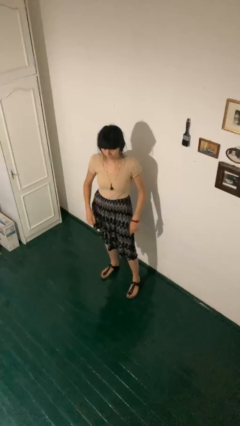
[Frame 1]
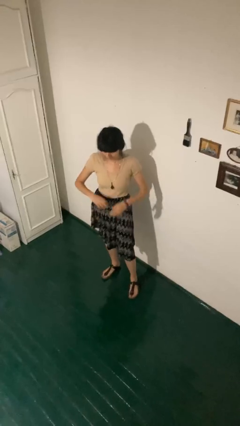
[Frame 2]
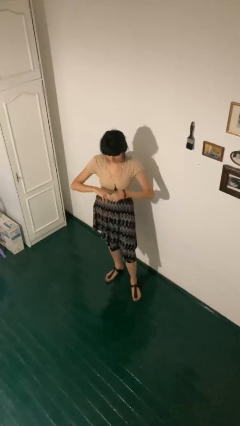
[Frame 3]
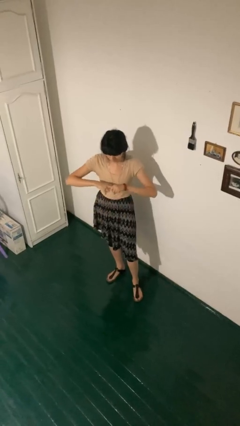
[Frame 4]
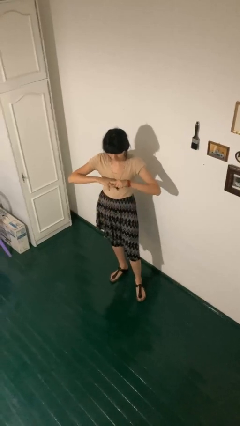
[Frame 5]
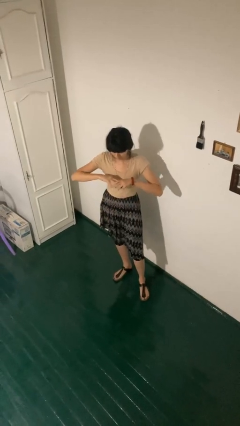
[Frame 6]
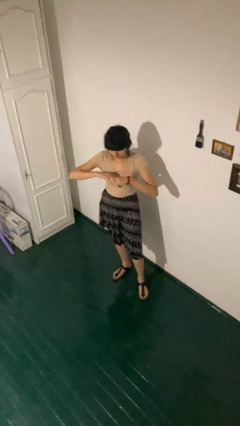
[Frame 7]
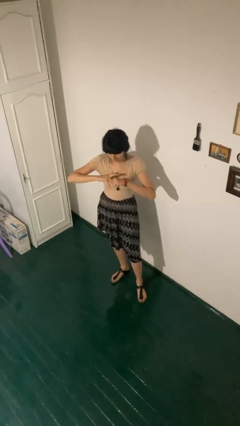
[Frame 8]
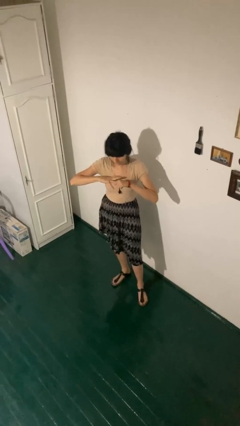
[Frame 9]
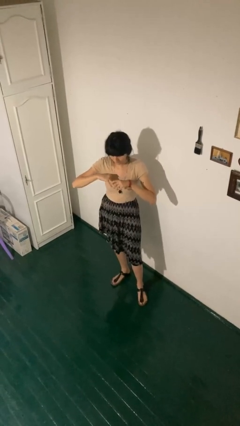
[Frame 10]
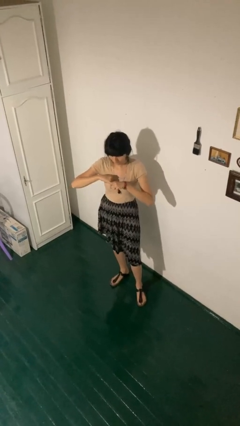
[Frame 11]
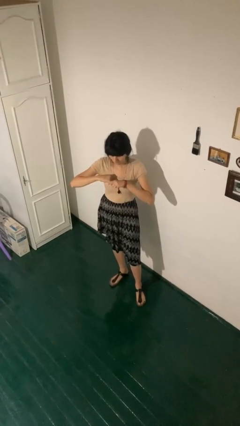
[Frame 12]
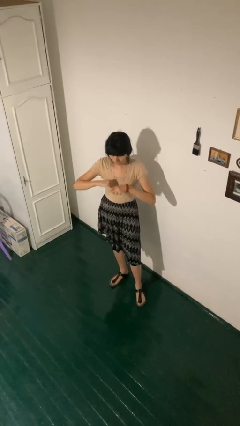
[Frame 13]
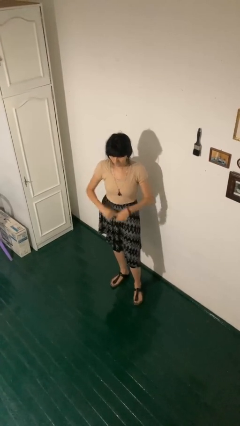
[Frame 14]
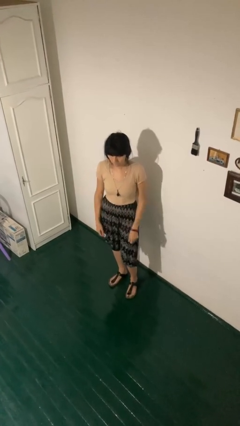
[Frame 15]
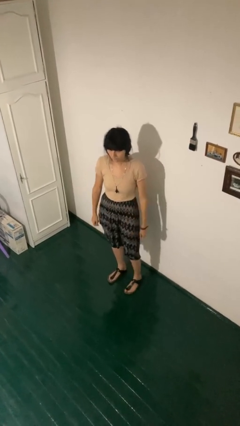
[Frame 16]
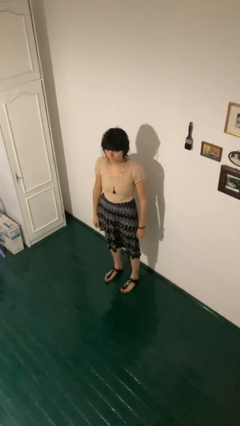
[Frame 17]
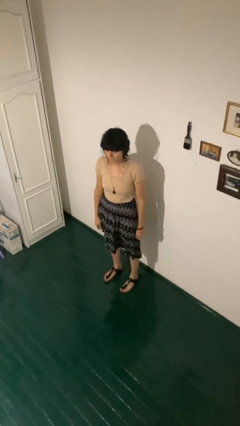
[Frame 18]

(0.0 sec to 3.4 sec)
person cracks knuckles

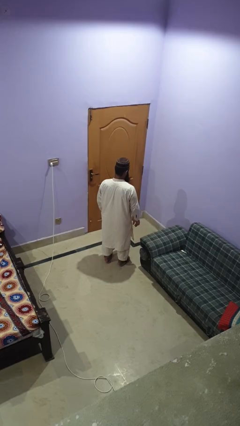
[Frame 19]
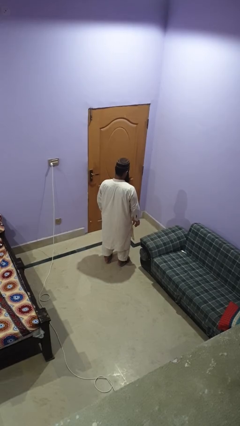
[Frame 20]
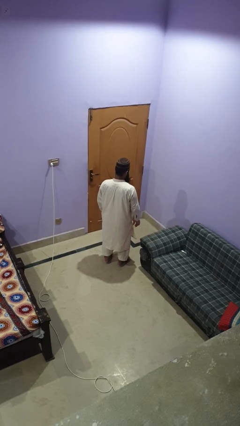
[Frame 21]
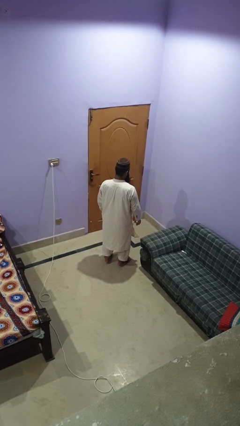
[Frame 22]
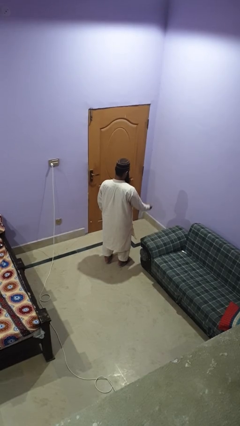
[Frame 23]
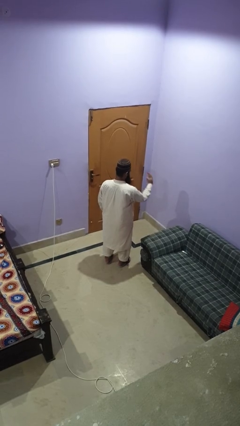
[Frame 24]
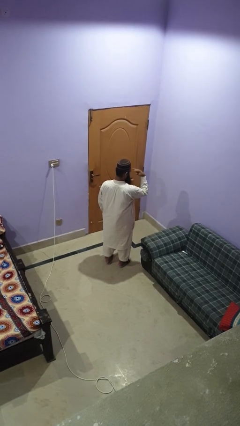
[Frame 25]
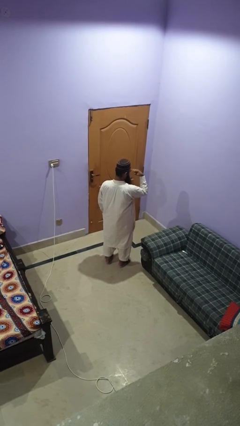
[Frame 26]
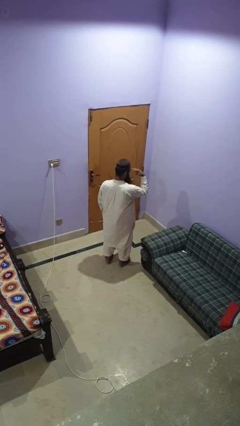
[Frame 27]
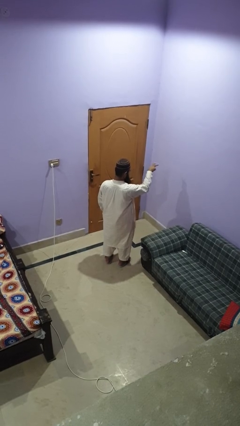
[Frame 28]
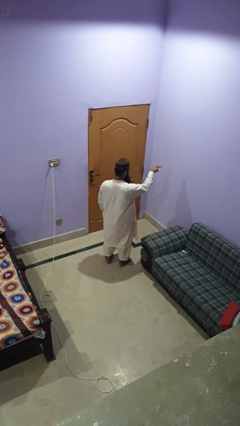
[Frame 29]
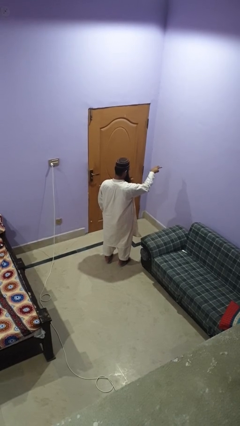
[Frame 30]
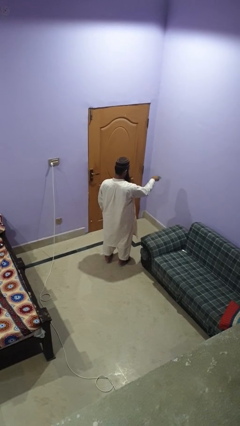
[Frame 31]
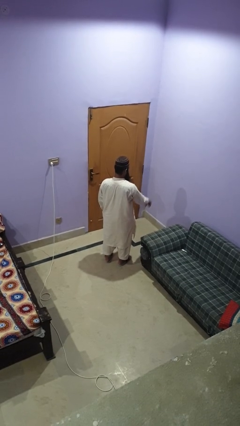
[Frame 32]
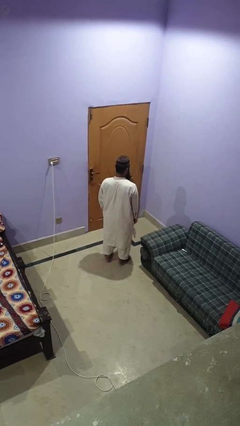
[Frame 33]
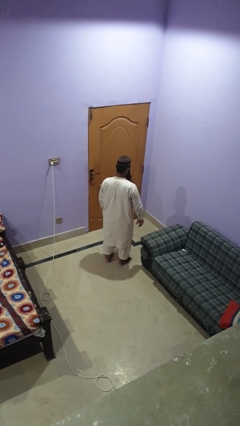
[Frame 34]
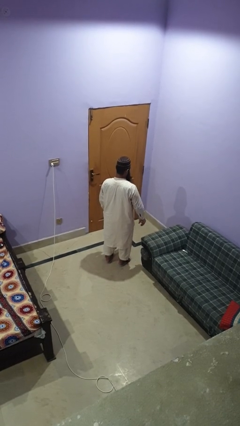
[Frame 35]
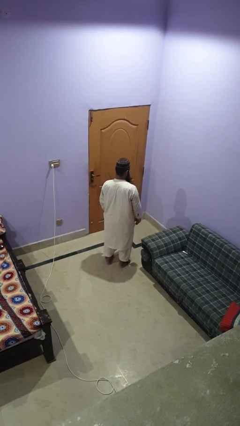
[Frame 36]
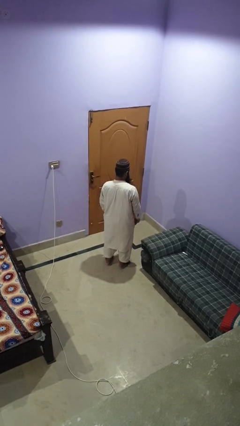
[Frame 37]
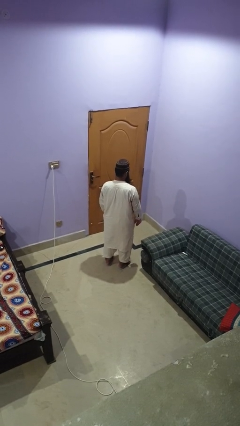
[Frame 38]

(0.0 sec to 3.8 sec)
person gestures watch closely

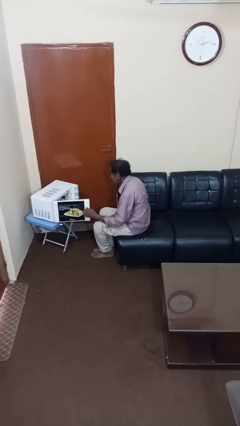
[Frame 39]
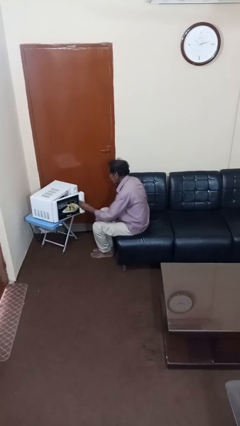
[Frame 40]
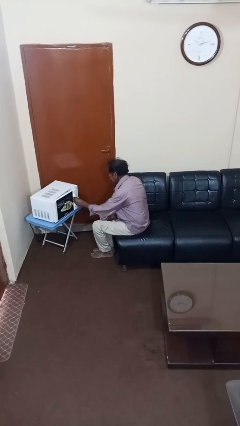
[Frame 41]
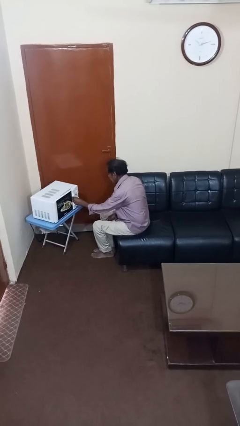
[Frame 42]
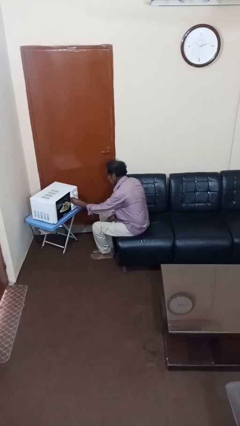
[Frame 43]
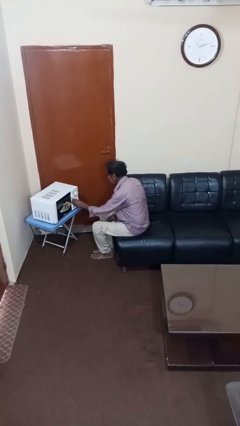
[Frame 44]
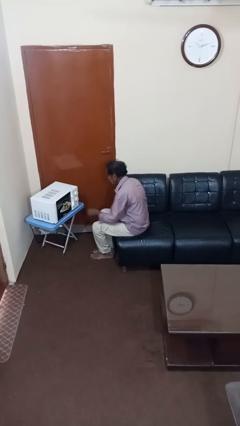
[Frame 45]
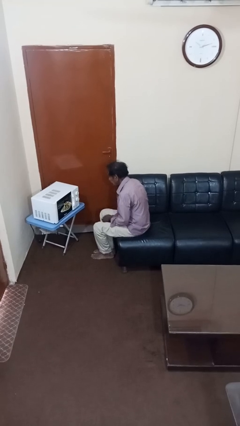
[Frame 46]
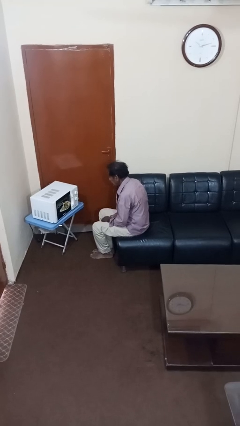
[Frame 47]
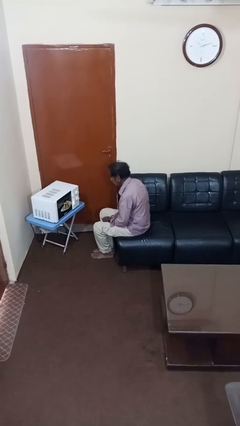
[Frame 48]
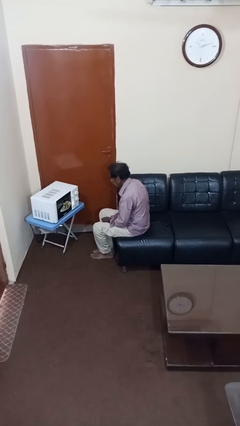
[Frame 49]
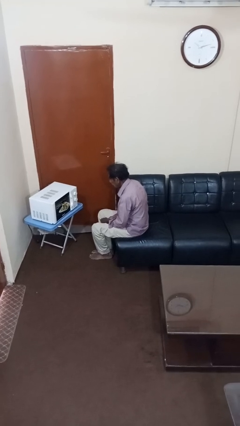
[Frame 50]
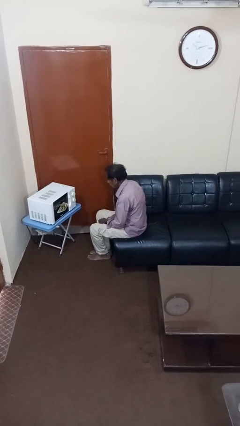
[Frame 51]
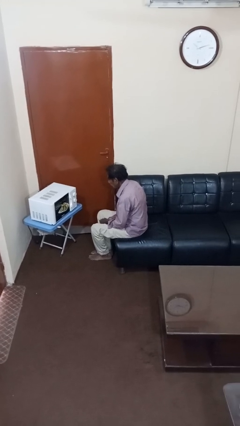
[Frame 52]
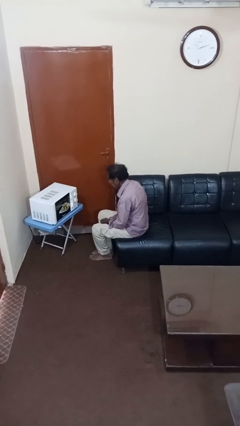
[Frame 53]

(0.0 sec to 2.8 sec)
person closes microwave

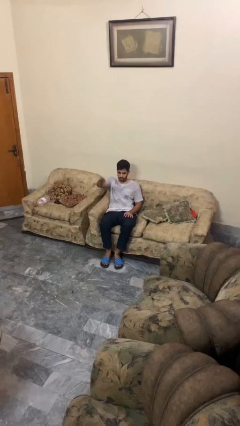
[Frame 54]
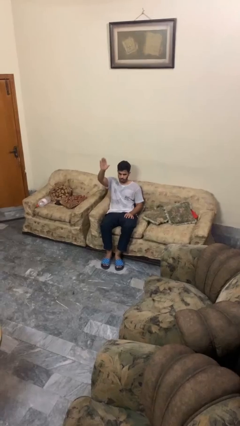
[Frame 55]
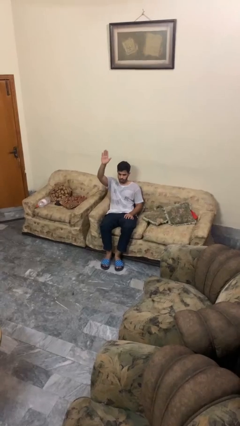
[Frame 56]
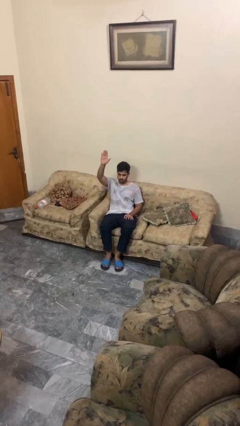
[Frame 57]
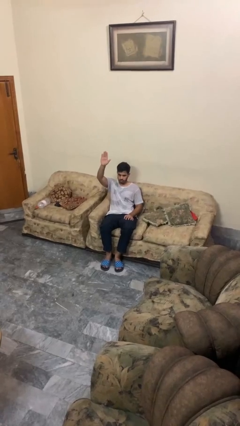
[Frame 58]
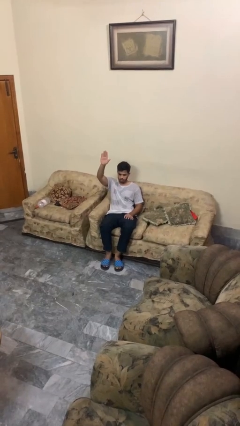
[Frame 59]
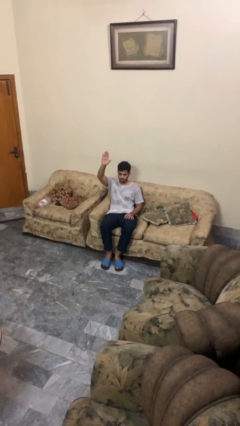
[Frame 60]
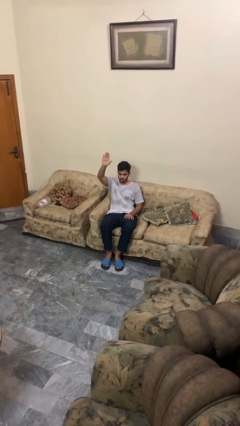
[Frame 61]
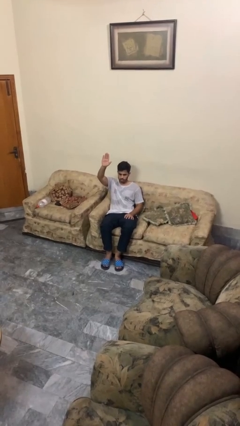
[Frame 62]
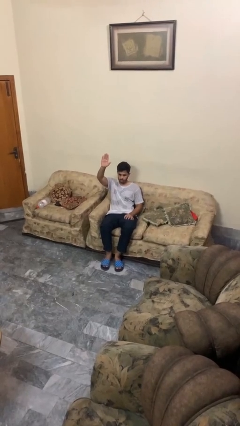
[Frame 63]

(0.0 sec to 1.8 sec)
person gestures raise hand

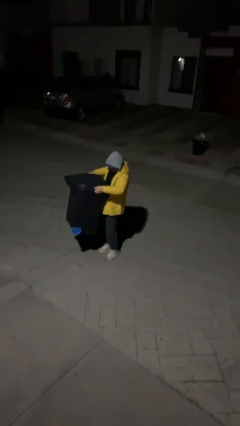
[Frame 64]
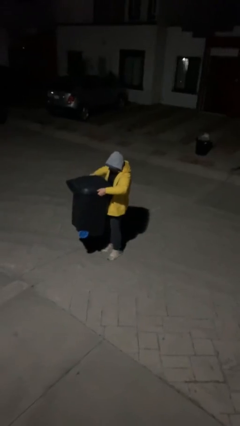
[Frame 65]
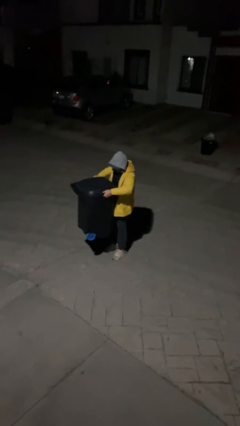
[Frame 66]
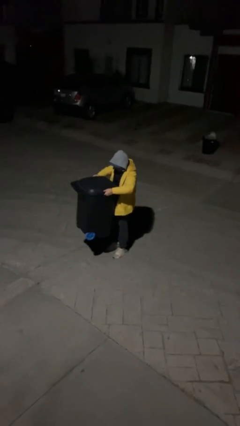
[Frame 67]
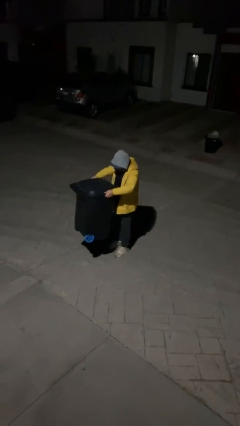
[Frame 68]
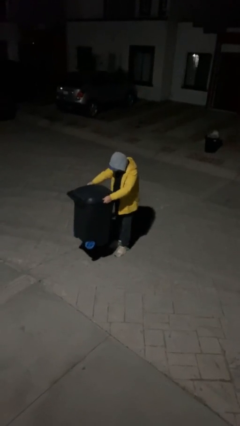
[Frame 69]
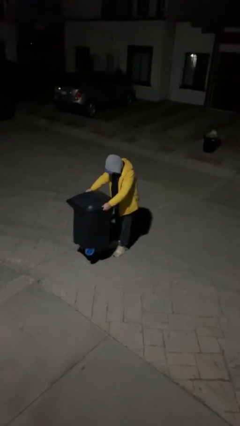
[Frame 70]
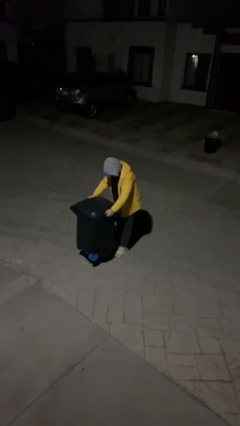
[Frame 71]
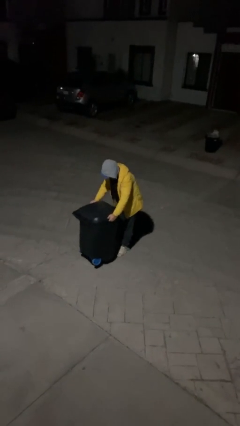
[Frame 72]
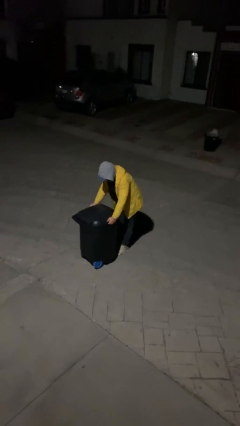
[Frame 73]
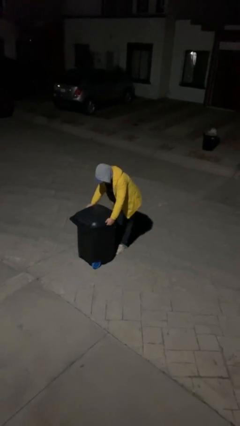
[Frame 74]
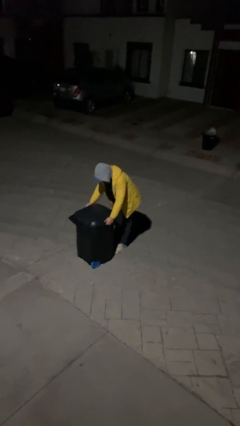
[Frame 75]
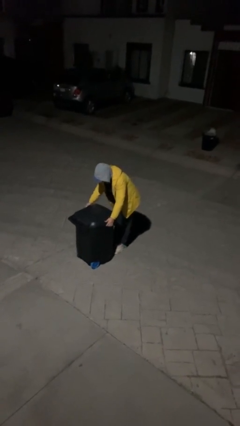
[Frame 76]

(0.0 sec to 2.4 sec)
person puts down object on floor

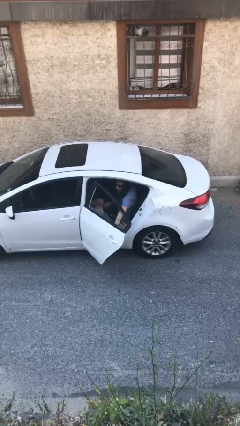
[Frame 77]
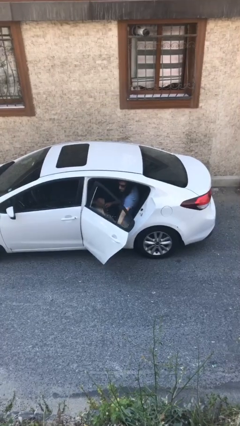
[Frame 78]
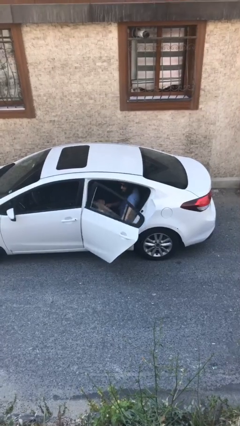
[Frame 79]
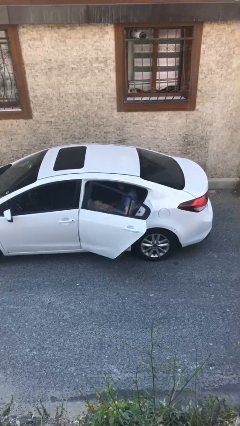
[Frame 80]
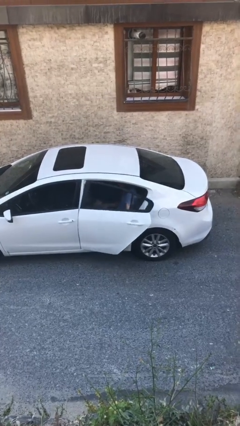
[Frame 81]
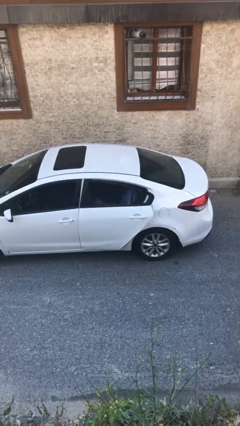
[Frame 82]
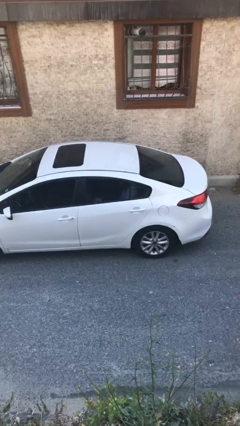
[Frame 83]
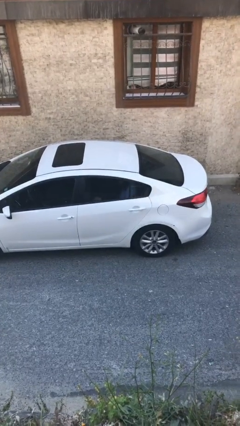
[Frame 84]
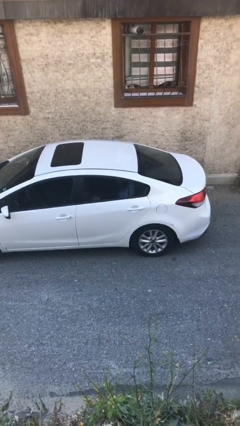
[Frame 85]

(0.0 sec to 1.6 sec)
person closes car door

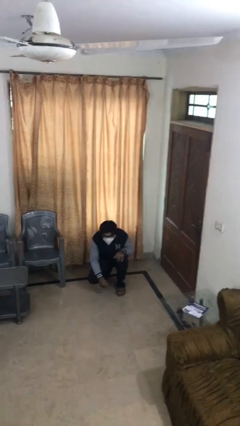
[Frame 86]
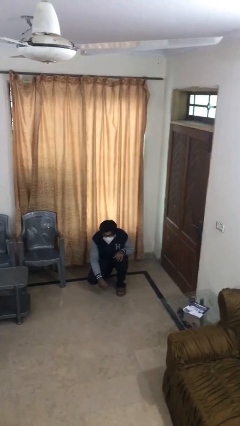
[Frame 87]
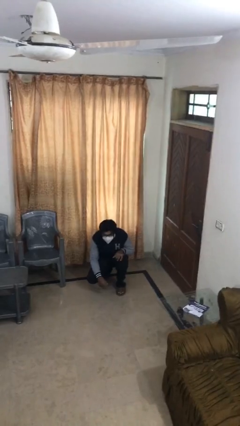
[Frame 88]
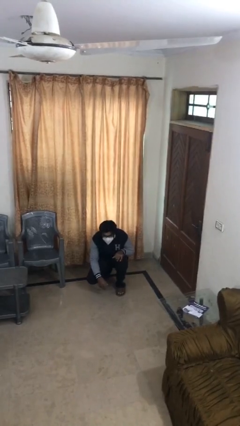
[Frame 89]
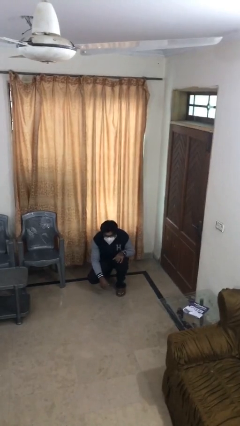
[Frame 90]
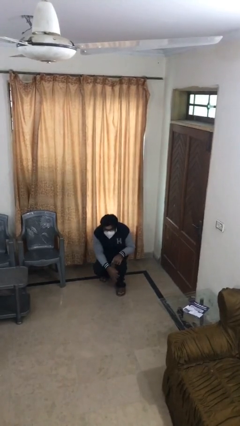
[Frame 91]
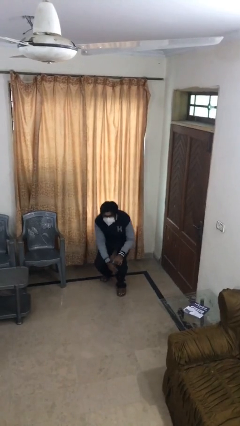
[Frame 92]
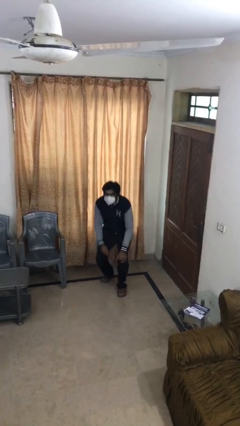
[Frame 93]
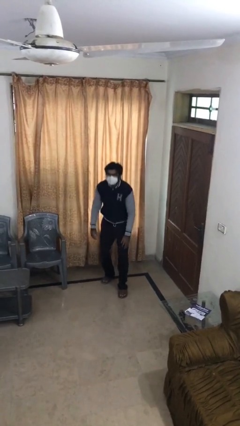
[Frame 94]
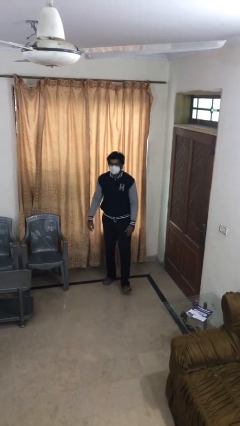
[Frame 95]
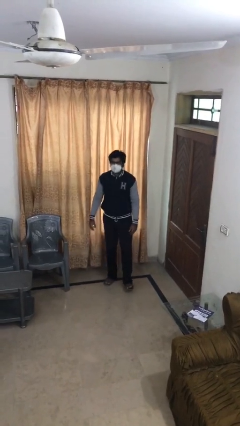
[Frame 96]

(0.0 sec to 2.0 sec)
person stands up
